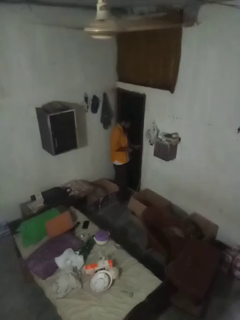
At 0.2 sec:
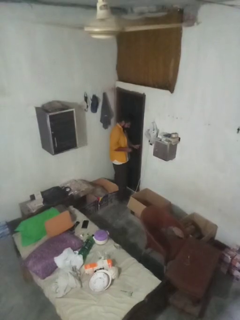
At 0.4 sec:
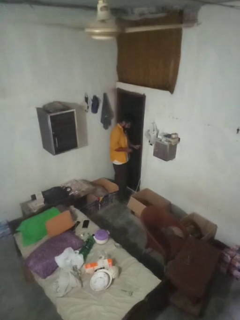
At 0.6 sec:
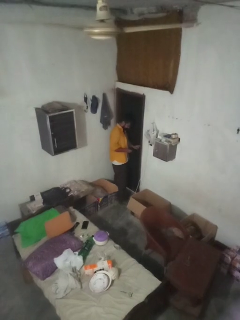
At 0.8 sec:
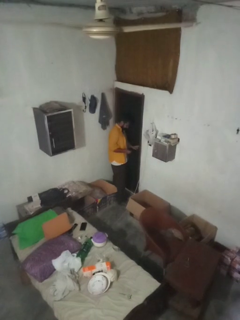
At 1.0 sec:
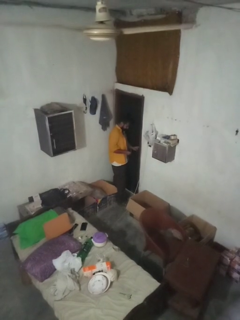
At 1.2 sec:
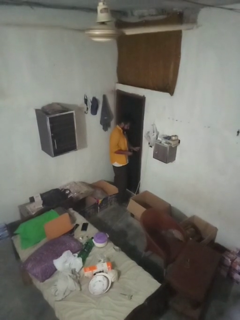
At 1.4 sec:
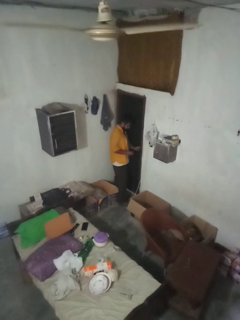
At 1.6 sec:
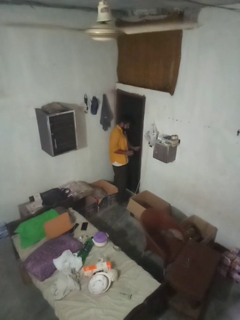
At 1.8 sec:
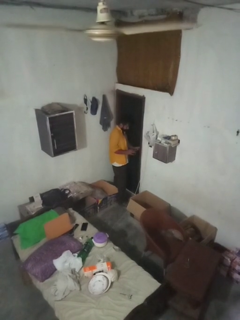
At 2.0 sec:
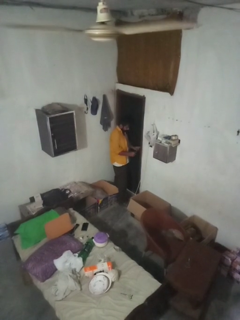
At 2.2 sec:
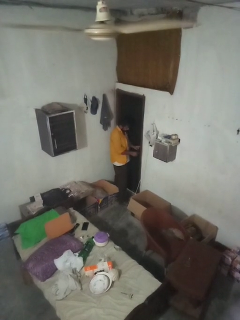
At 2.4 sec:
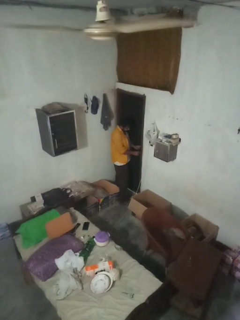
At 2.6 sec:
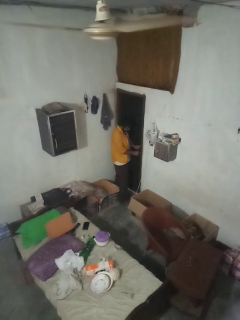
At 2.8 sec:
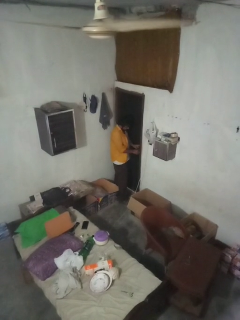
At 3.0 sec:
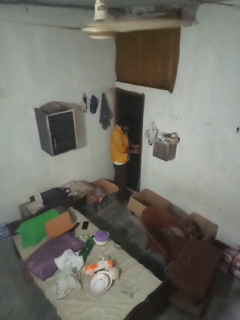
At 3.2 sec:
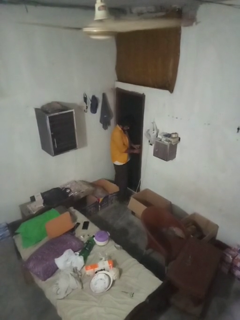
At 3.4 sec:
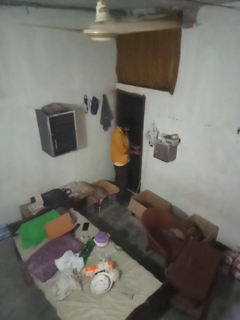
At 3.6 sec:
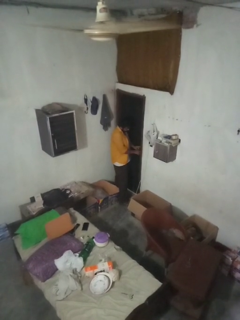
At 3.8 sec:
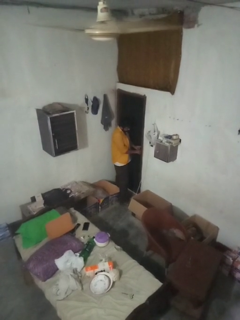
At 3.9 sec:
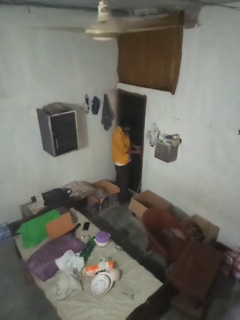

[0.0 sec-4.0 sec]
person unlocks door with keys

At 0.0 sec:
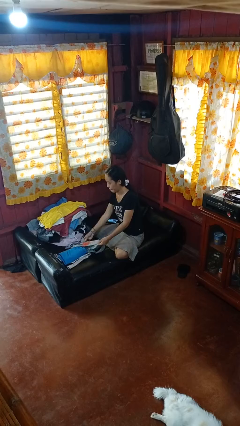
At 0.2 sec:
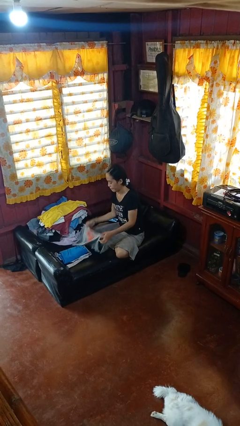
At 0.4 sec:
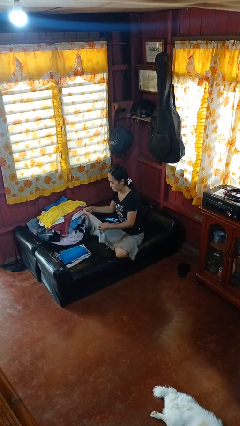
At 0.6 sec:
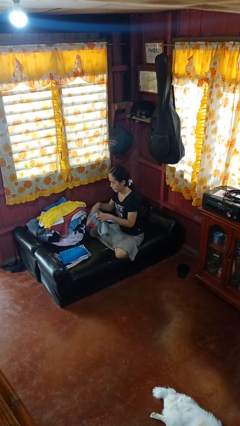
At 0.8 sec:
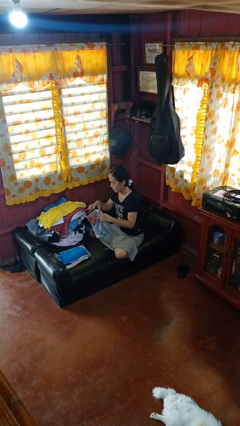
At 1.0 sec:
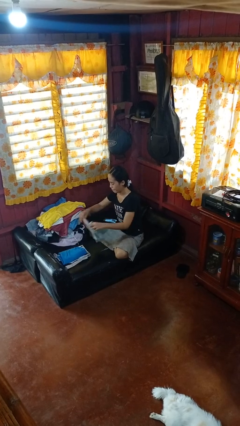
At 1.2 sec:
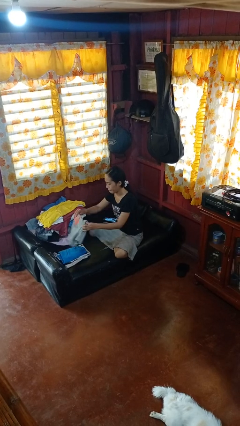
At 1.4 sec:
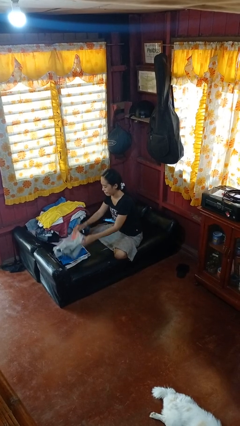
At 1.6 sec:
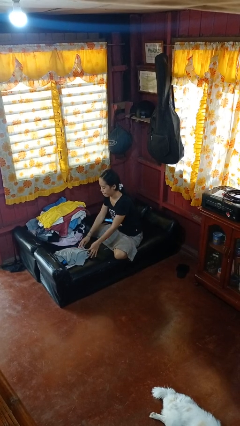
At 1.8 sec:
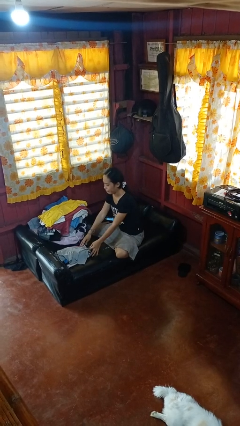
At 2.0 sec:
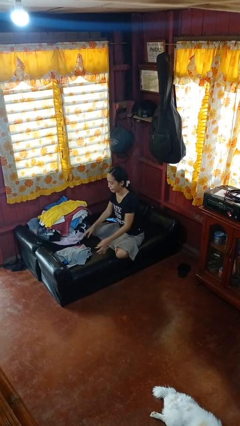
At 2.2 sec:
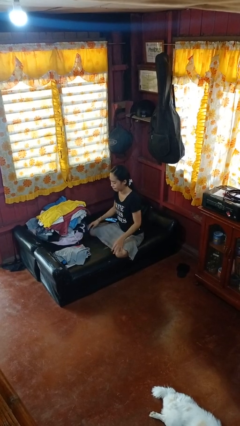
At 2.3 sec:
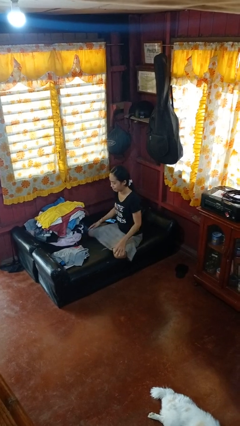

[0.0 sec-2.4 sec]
person folds shirt

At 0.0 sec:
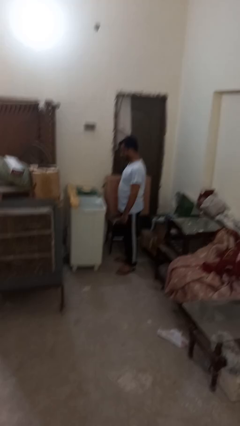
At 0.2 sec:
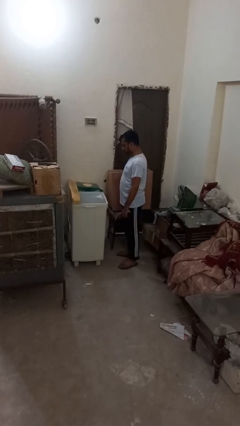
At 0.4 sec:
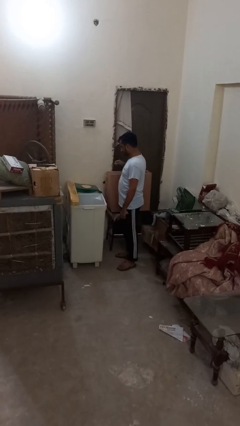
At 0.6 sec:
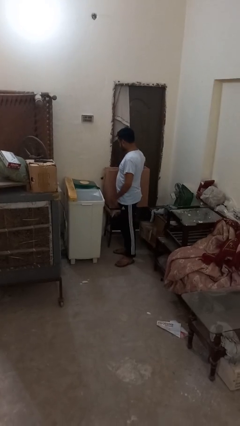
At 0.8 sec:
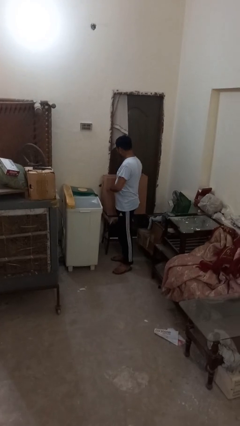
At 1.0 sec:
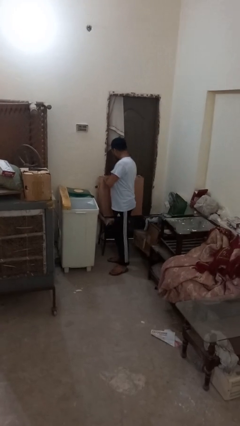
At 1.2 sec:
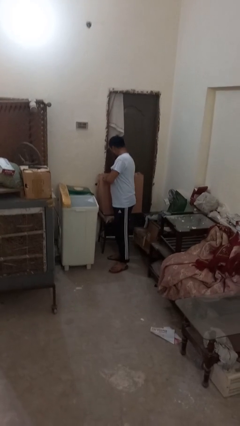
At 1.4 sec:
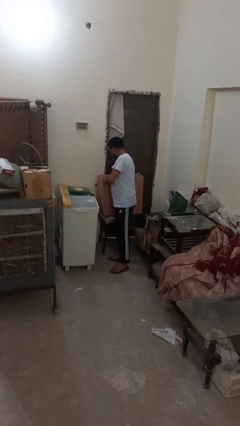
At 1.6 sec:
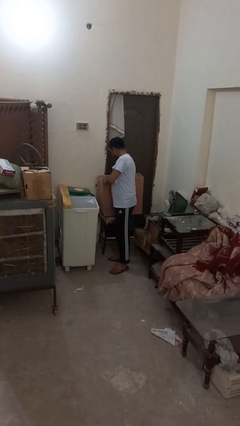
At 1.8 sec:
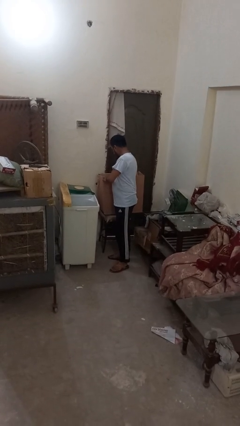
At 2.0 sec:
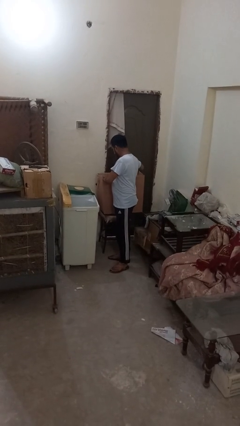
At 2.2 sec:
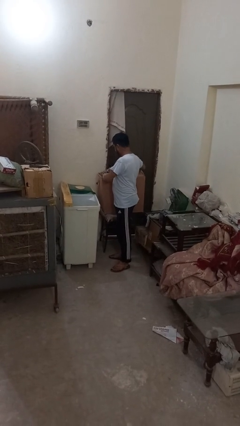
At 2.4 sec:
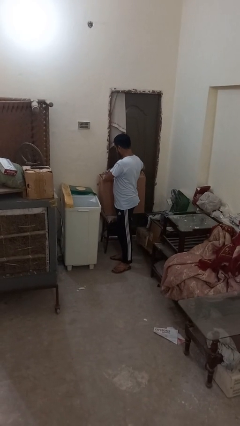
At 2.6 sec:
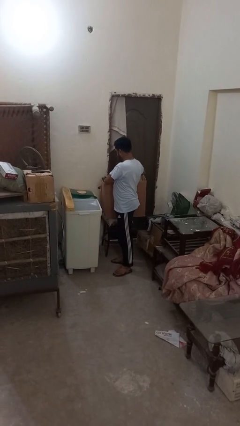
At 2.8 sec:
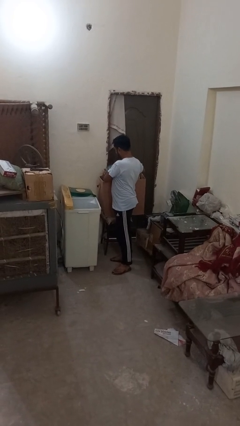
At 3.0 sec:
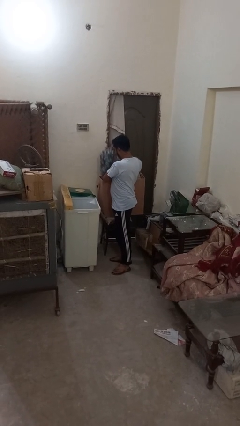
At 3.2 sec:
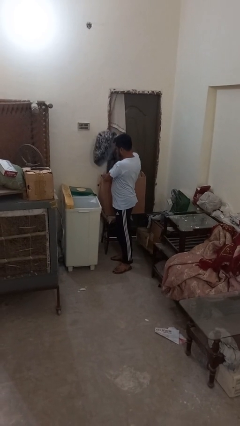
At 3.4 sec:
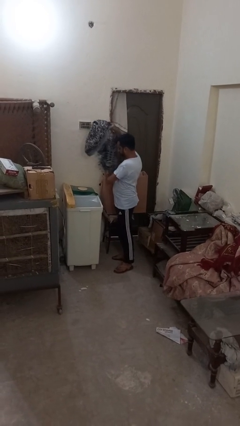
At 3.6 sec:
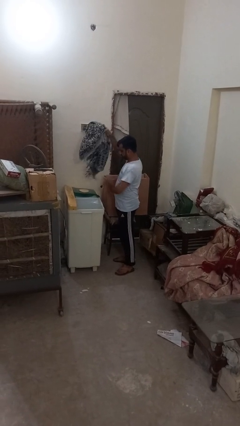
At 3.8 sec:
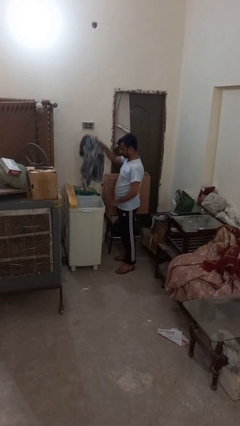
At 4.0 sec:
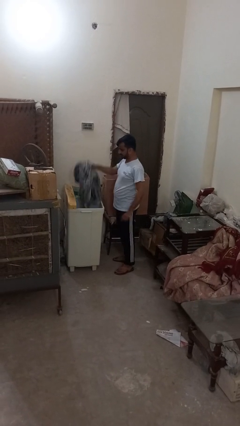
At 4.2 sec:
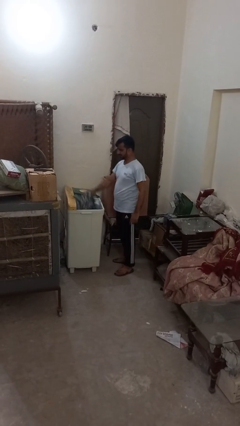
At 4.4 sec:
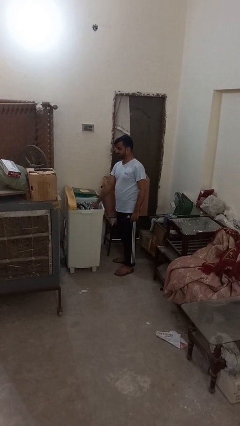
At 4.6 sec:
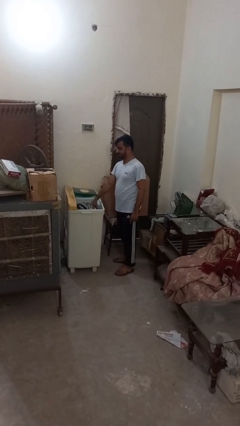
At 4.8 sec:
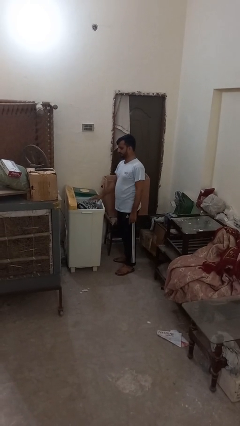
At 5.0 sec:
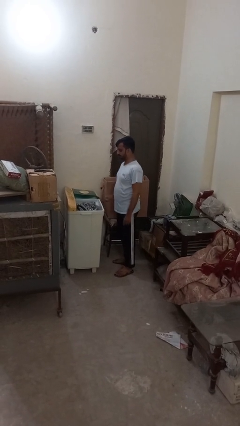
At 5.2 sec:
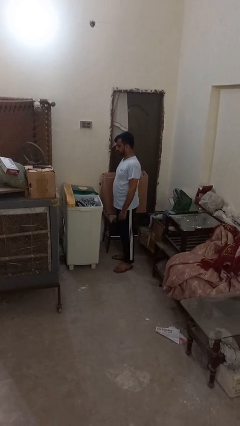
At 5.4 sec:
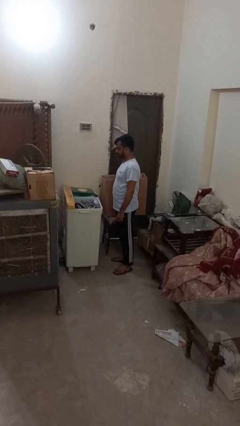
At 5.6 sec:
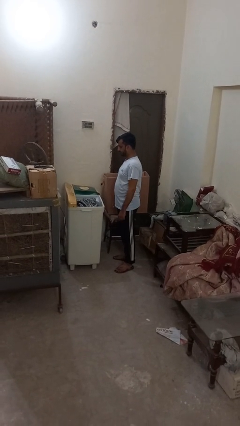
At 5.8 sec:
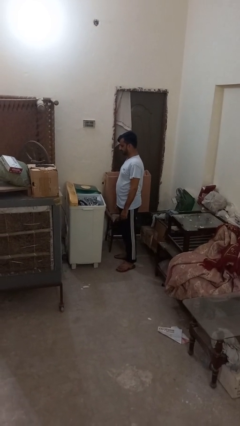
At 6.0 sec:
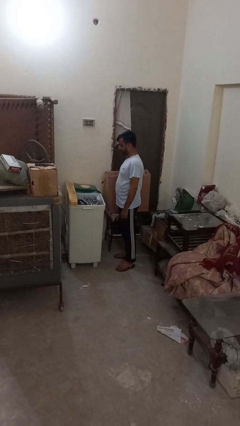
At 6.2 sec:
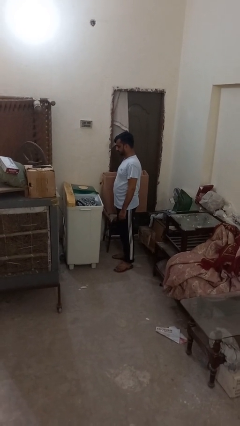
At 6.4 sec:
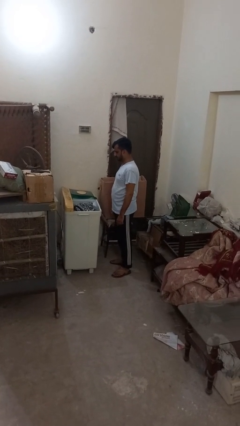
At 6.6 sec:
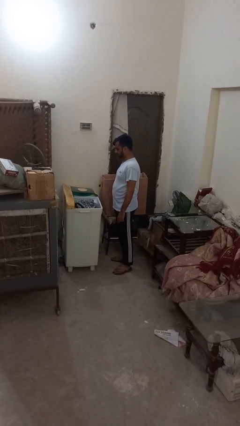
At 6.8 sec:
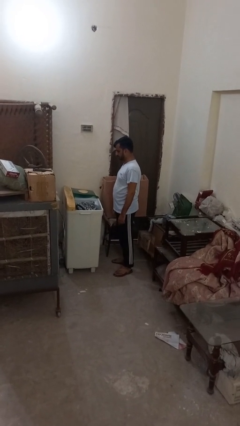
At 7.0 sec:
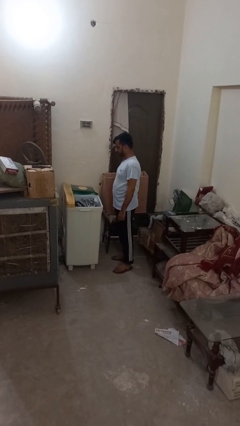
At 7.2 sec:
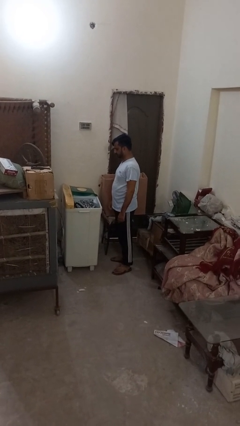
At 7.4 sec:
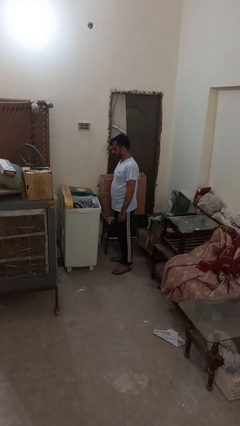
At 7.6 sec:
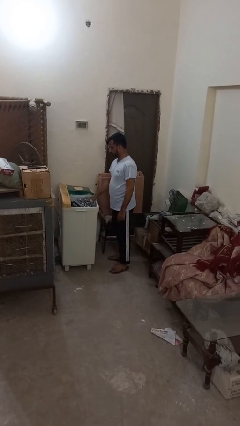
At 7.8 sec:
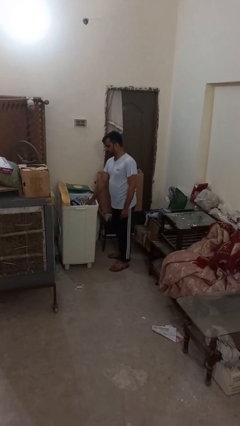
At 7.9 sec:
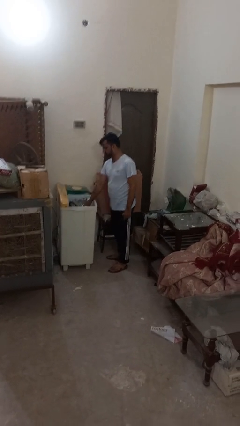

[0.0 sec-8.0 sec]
person loads dryer

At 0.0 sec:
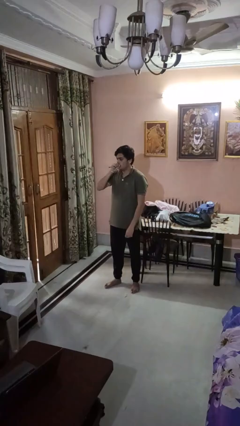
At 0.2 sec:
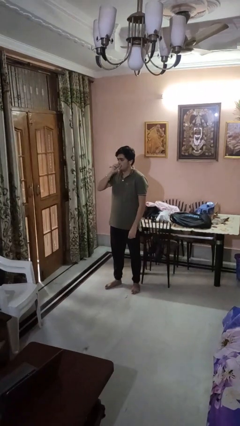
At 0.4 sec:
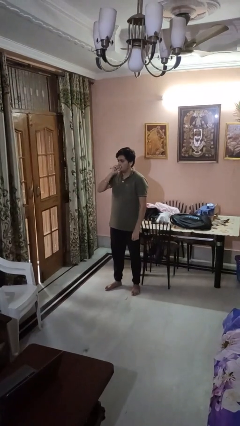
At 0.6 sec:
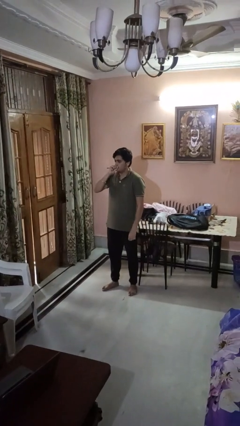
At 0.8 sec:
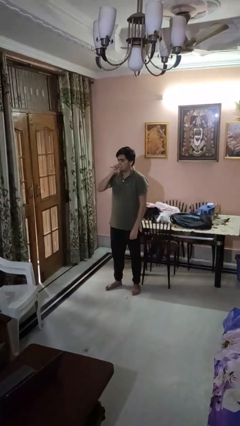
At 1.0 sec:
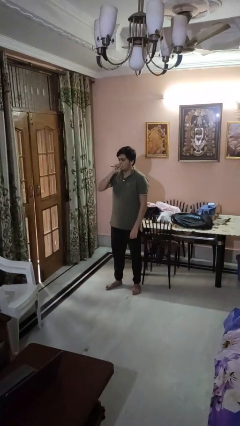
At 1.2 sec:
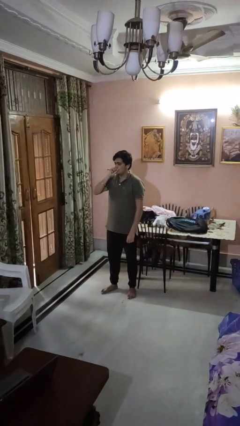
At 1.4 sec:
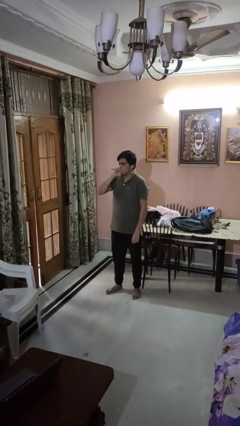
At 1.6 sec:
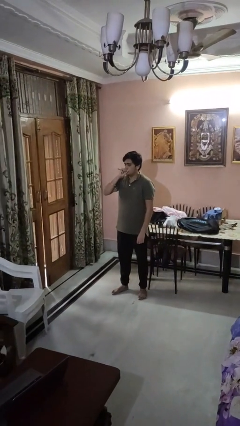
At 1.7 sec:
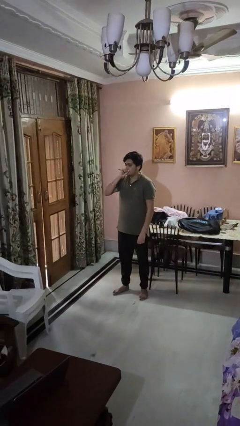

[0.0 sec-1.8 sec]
person vapes

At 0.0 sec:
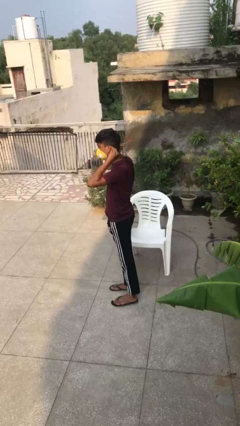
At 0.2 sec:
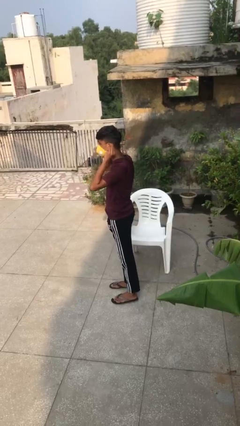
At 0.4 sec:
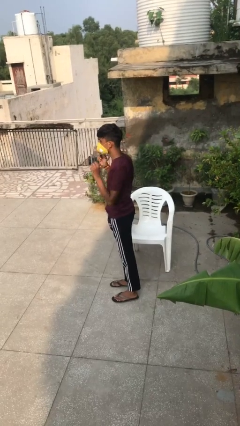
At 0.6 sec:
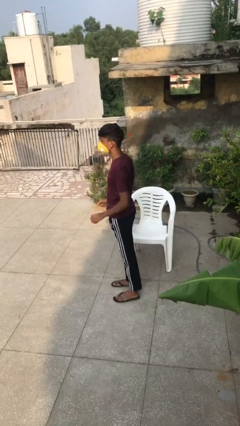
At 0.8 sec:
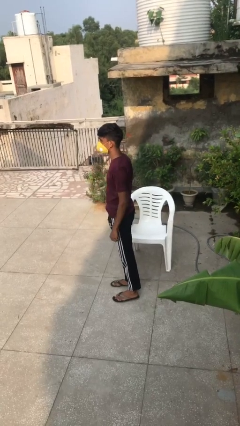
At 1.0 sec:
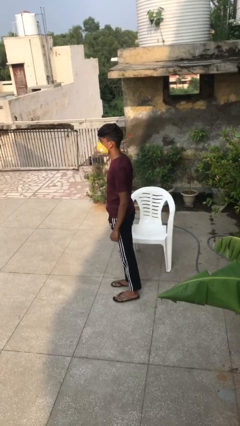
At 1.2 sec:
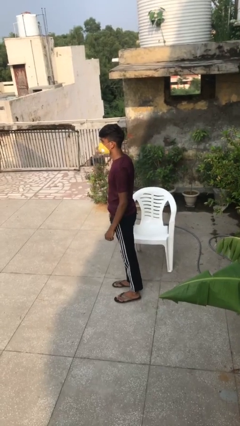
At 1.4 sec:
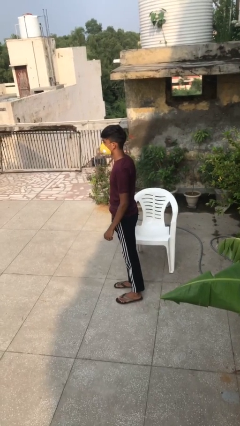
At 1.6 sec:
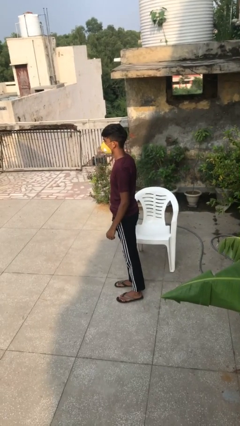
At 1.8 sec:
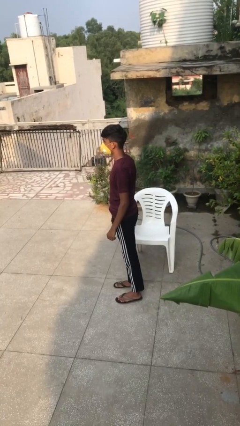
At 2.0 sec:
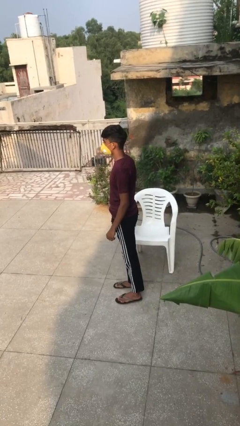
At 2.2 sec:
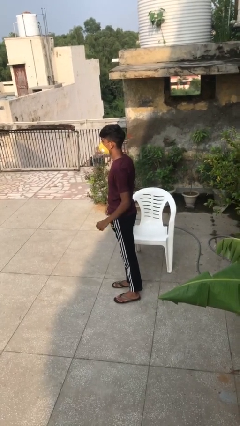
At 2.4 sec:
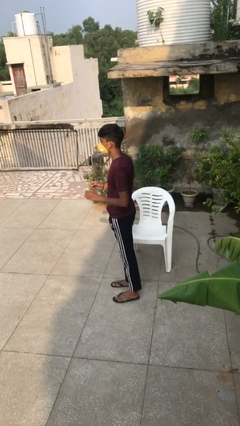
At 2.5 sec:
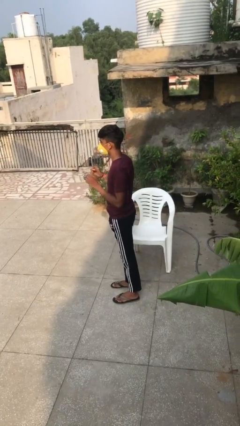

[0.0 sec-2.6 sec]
person puts on facemask
